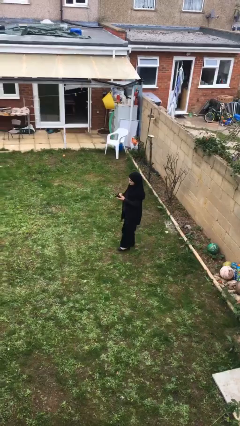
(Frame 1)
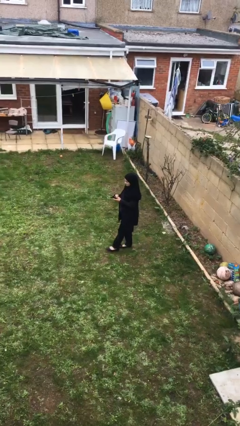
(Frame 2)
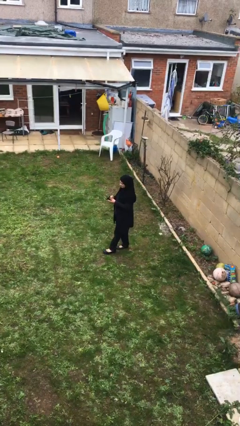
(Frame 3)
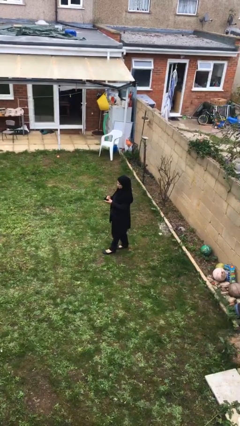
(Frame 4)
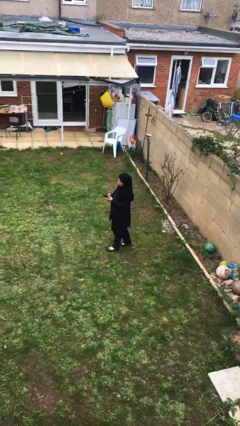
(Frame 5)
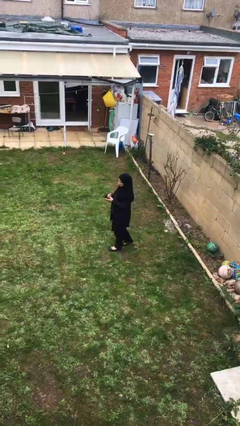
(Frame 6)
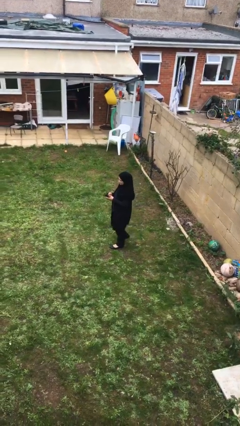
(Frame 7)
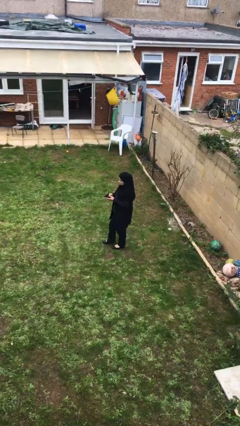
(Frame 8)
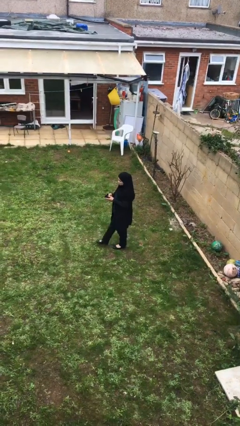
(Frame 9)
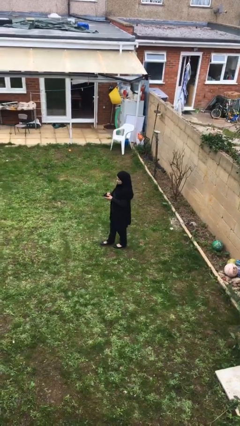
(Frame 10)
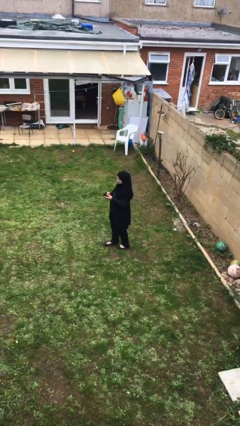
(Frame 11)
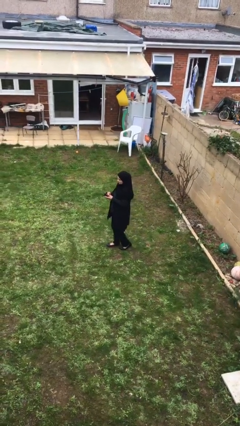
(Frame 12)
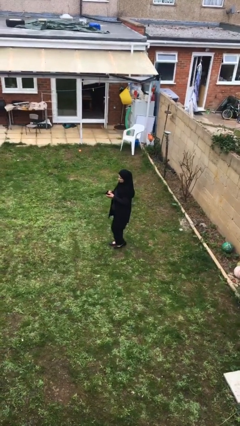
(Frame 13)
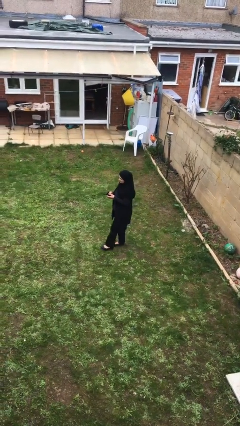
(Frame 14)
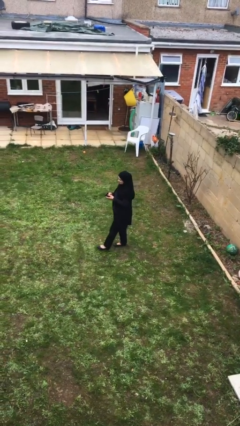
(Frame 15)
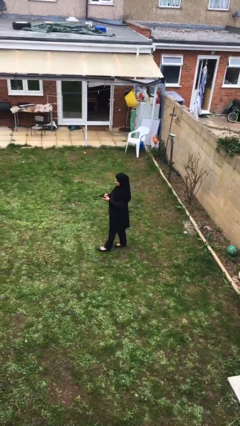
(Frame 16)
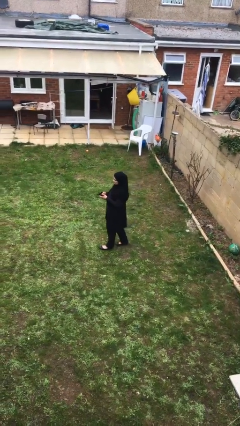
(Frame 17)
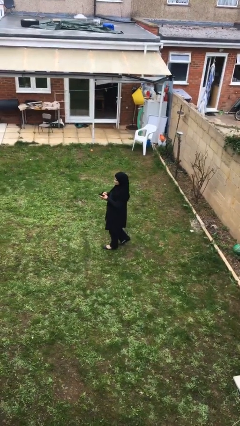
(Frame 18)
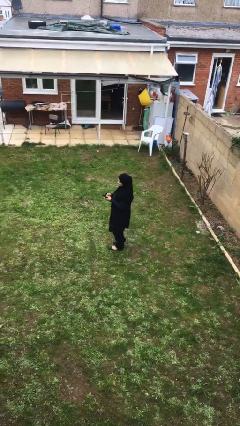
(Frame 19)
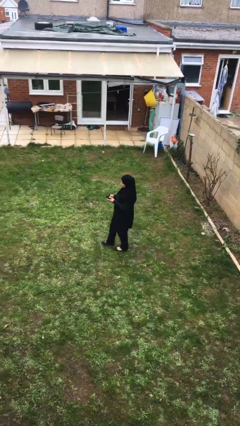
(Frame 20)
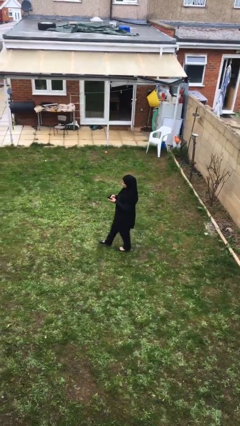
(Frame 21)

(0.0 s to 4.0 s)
person texts on phone

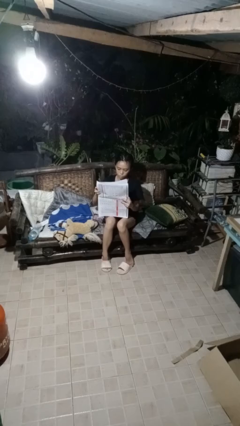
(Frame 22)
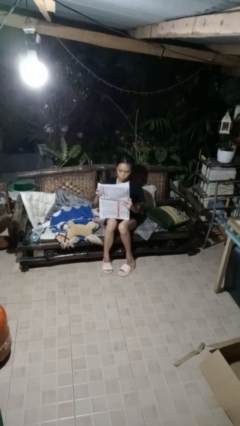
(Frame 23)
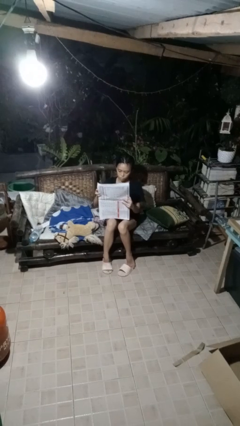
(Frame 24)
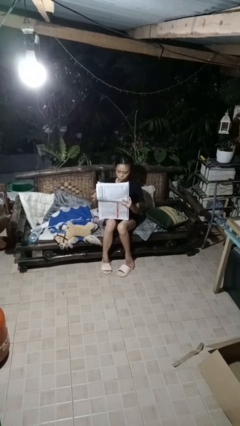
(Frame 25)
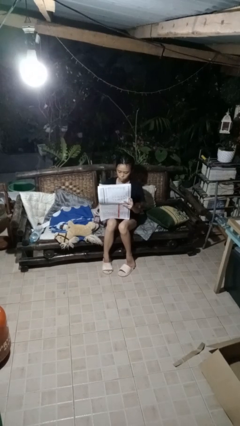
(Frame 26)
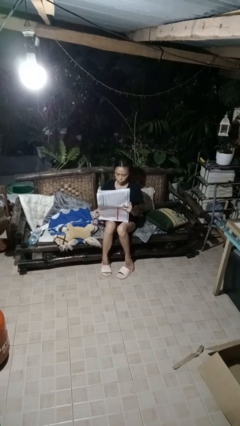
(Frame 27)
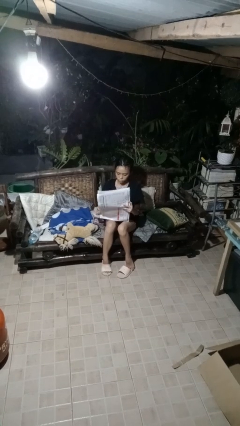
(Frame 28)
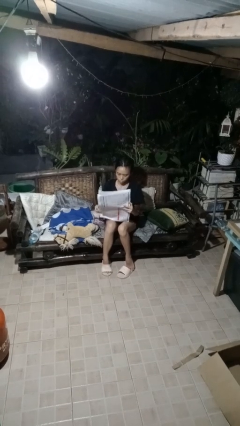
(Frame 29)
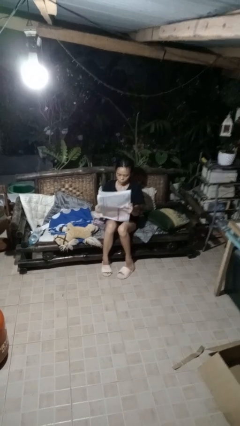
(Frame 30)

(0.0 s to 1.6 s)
person reads newspaper

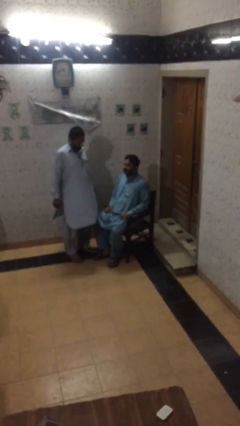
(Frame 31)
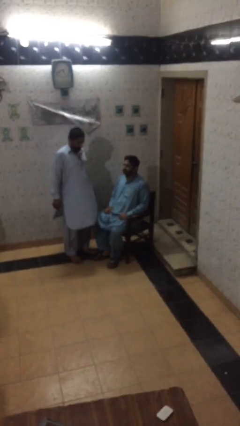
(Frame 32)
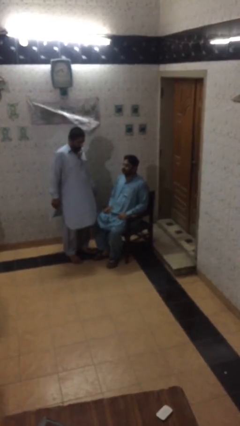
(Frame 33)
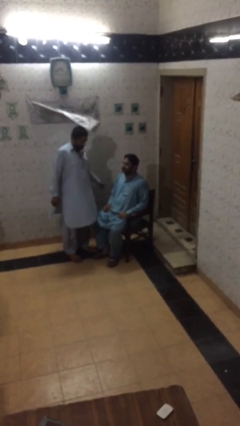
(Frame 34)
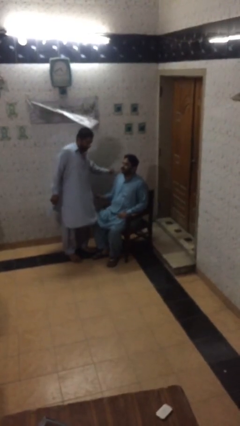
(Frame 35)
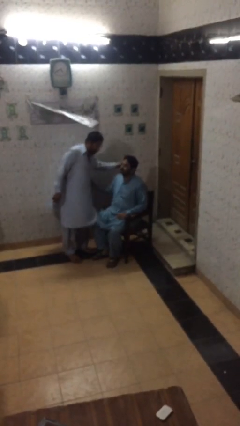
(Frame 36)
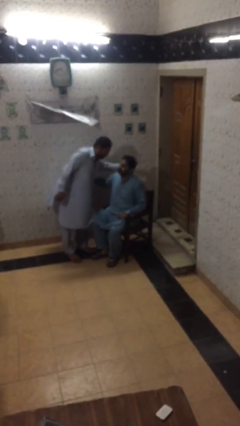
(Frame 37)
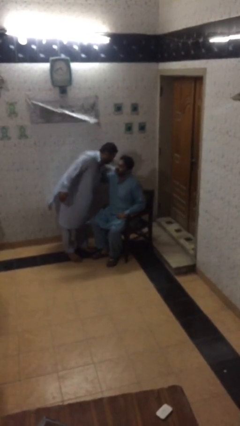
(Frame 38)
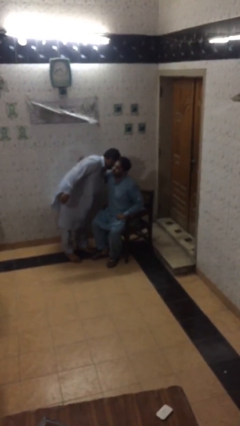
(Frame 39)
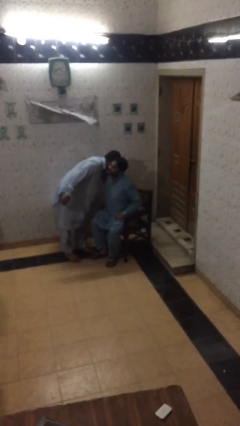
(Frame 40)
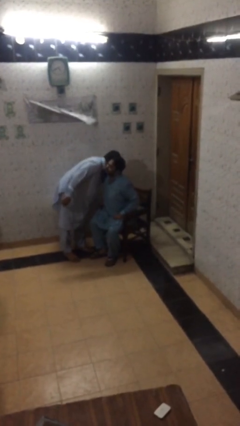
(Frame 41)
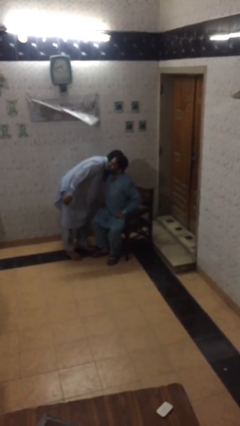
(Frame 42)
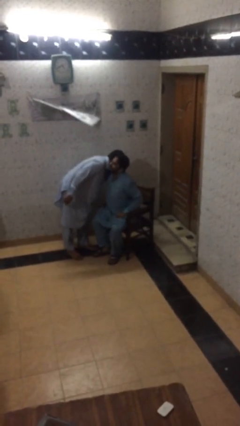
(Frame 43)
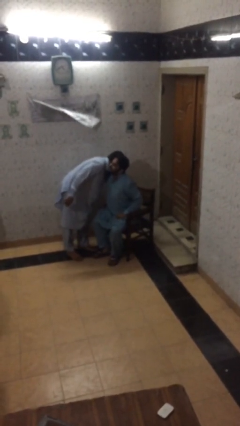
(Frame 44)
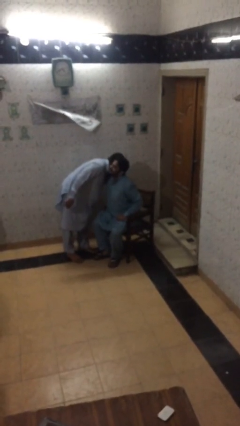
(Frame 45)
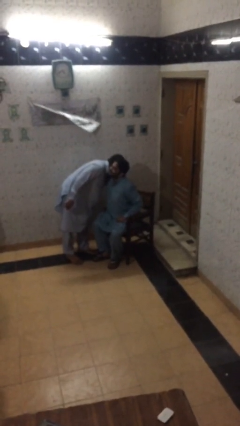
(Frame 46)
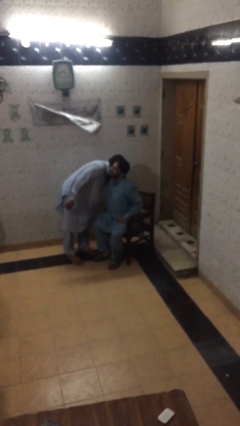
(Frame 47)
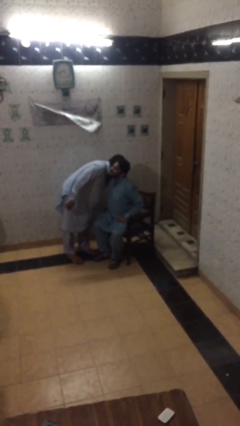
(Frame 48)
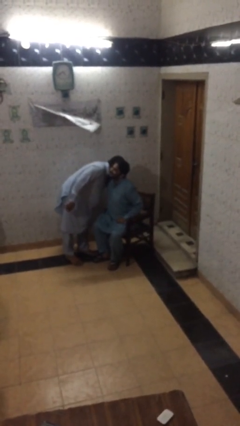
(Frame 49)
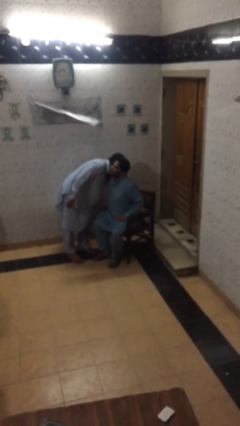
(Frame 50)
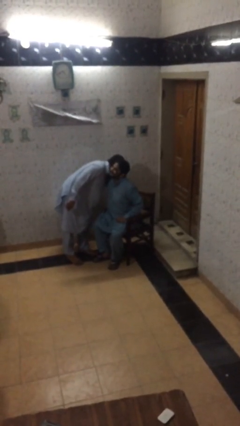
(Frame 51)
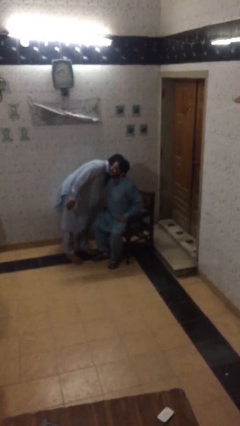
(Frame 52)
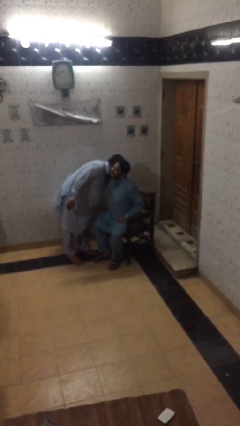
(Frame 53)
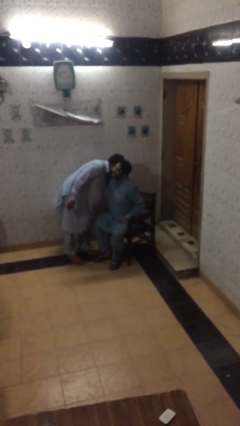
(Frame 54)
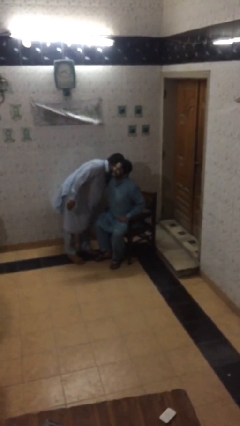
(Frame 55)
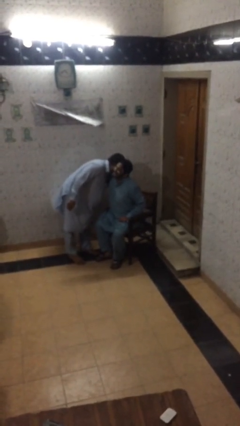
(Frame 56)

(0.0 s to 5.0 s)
person embraces person

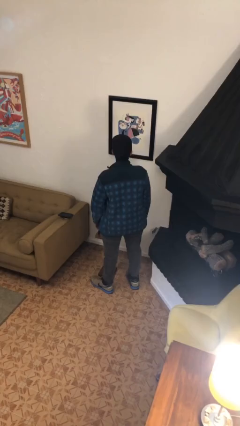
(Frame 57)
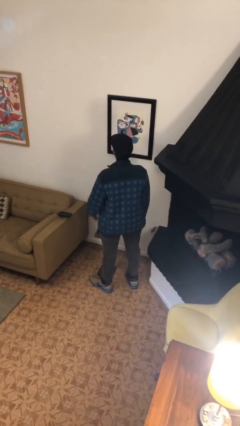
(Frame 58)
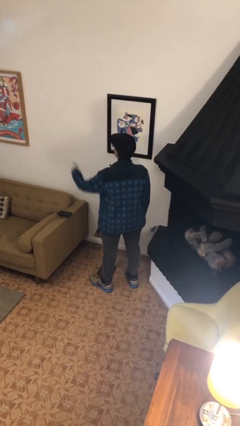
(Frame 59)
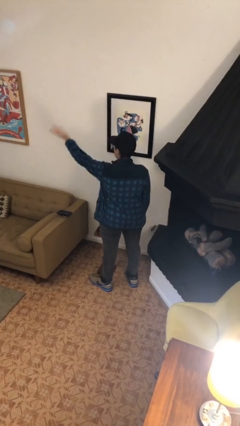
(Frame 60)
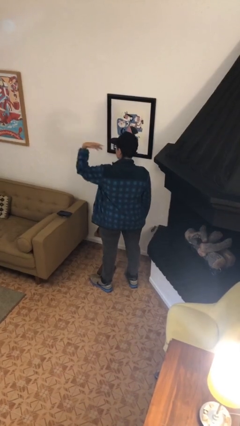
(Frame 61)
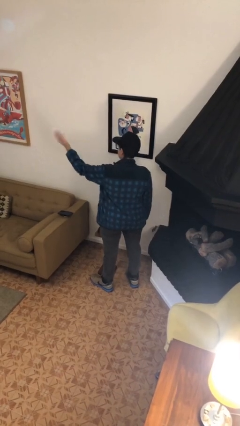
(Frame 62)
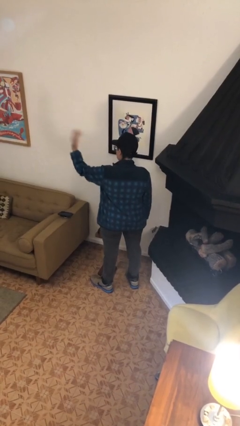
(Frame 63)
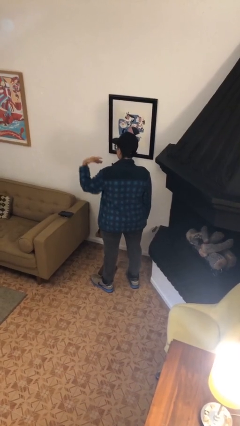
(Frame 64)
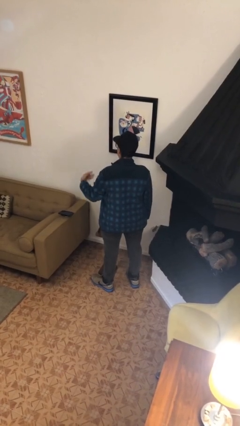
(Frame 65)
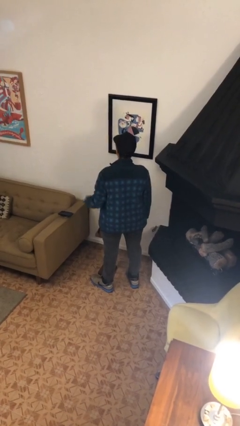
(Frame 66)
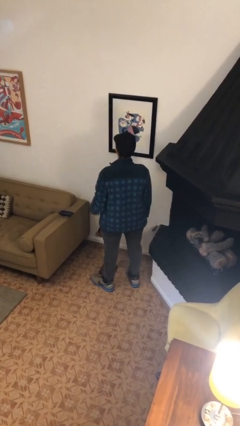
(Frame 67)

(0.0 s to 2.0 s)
person gestures come here

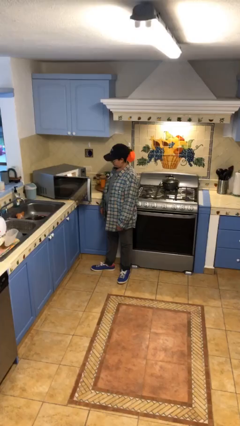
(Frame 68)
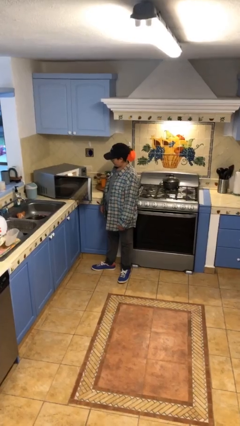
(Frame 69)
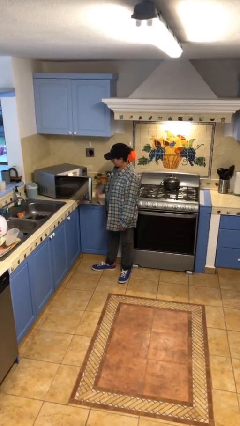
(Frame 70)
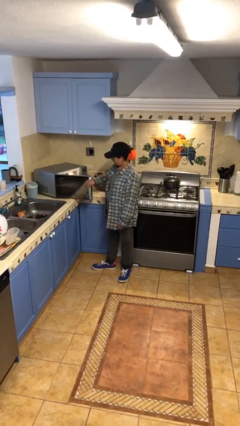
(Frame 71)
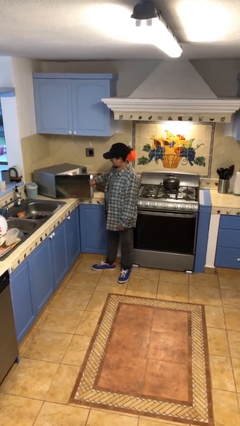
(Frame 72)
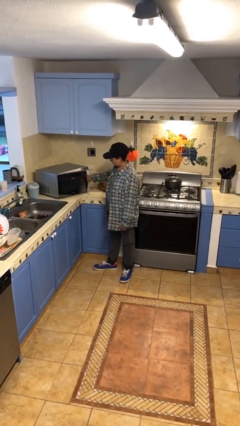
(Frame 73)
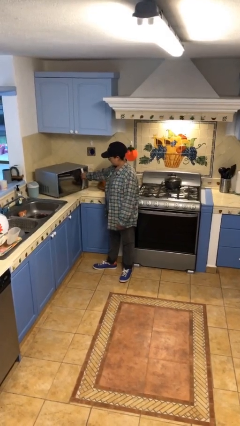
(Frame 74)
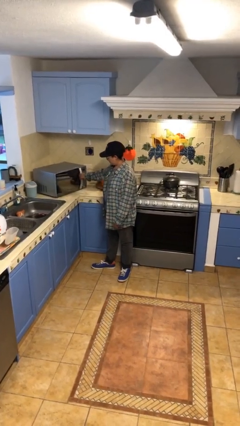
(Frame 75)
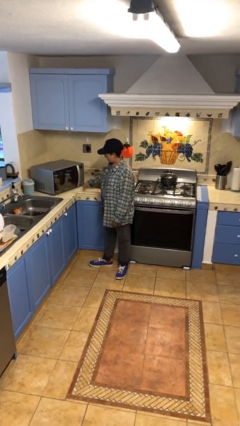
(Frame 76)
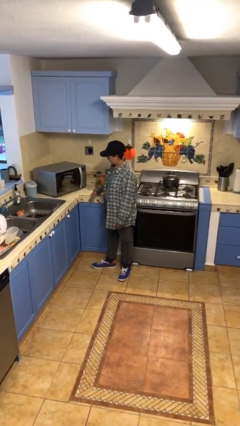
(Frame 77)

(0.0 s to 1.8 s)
person closes microwave

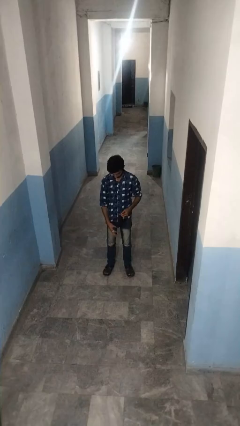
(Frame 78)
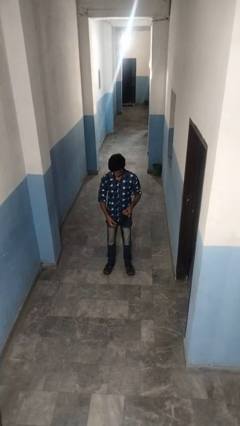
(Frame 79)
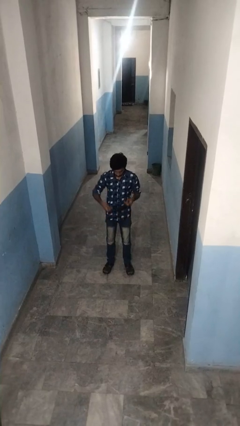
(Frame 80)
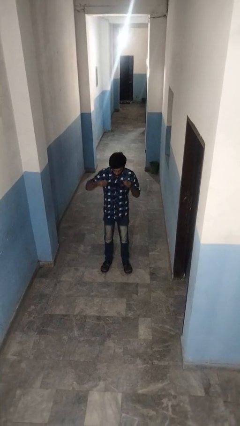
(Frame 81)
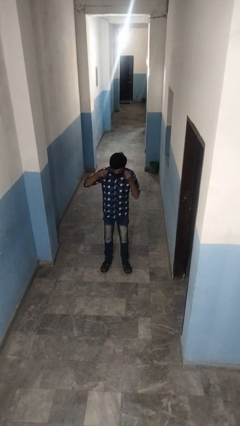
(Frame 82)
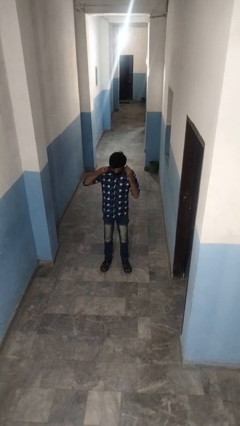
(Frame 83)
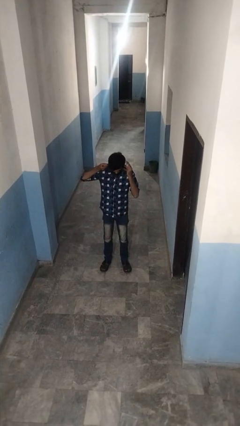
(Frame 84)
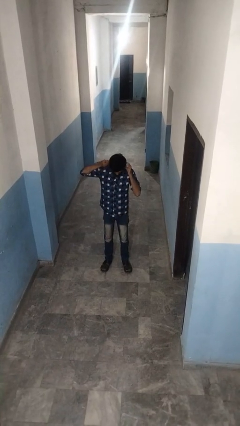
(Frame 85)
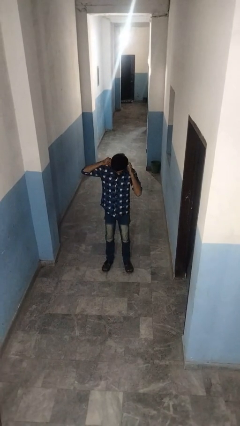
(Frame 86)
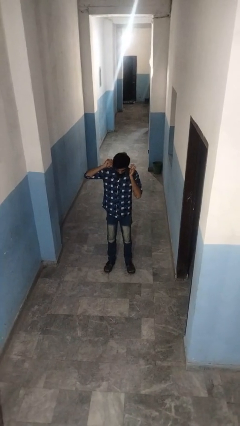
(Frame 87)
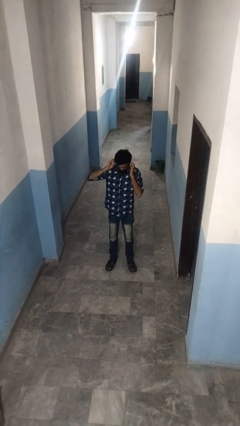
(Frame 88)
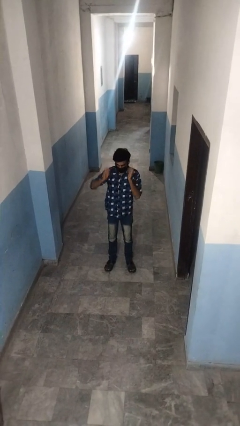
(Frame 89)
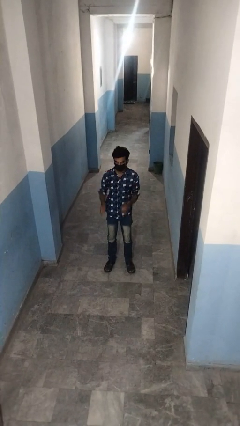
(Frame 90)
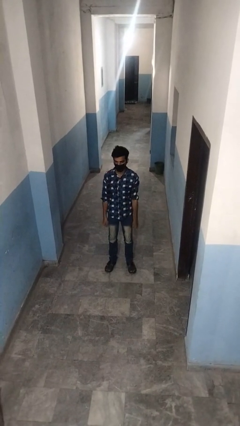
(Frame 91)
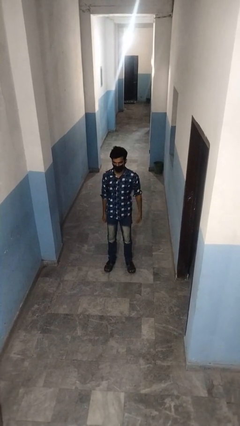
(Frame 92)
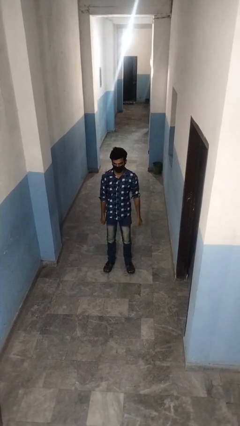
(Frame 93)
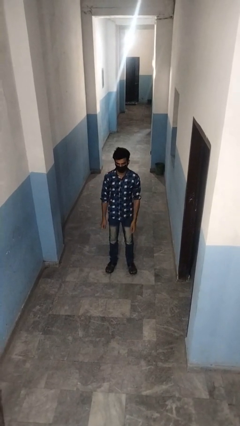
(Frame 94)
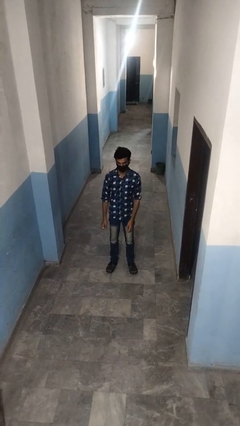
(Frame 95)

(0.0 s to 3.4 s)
person puts on facemask
